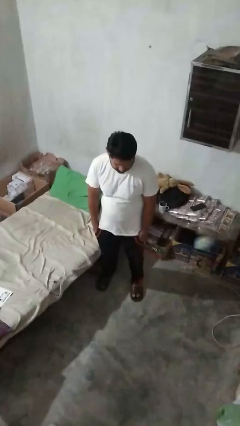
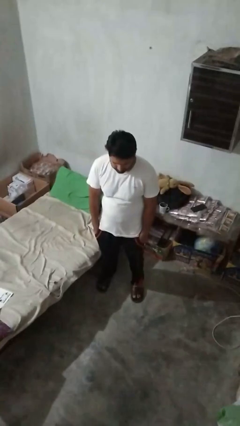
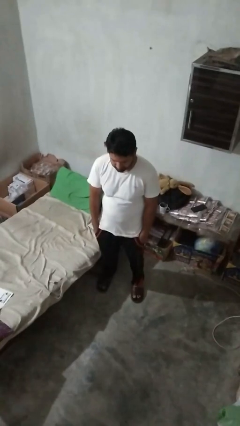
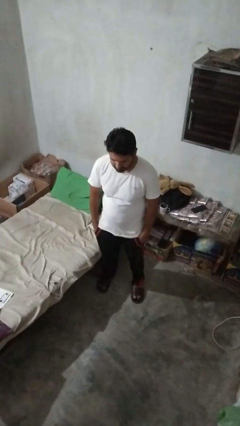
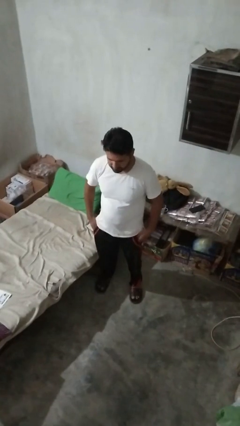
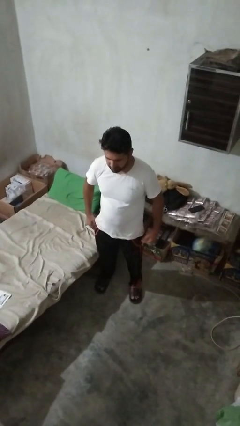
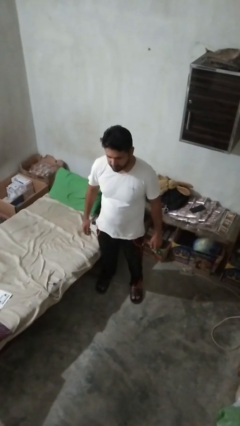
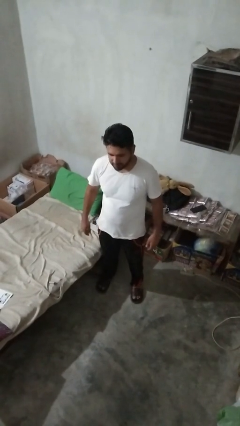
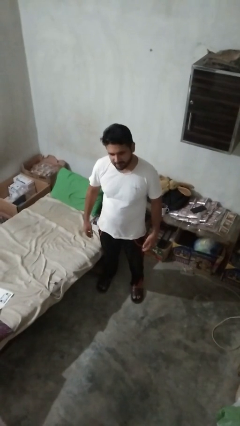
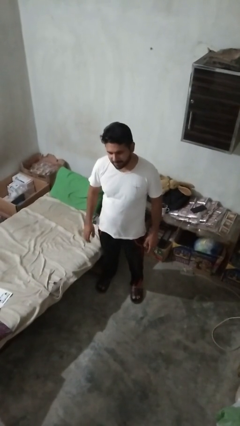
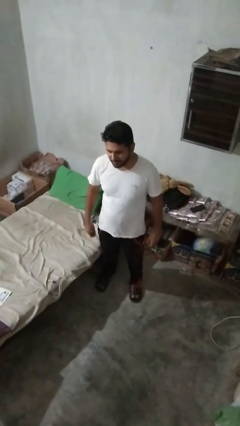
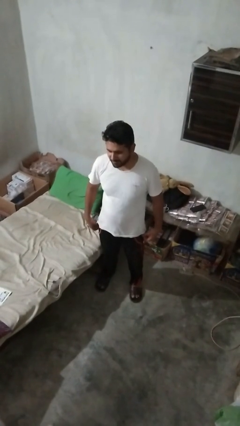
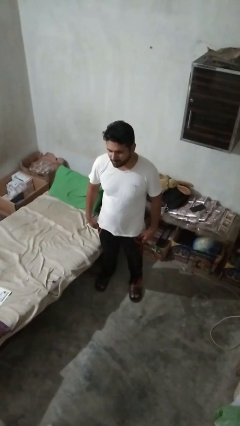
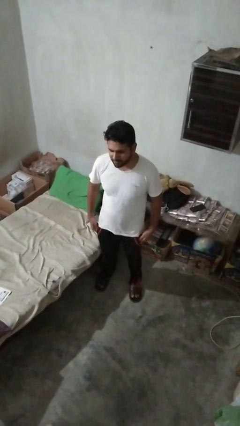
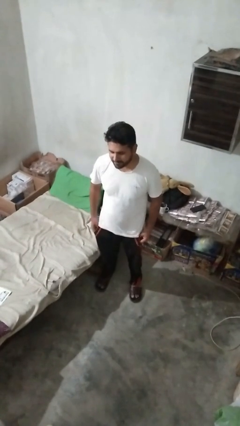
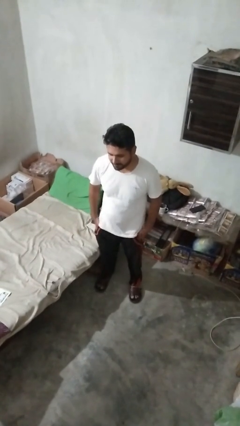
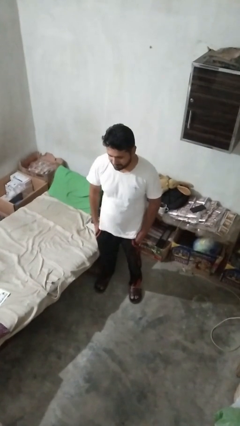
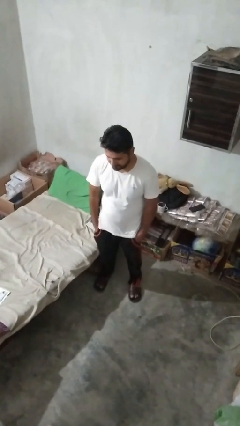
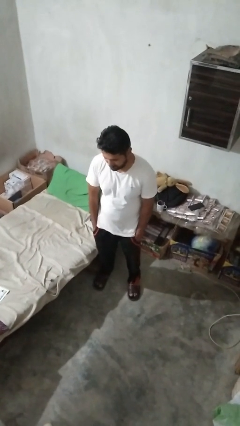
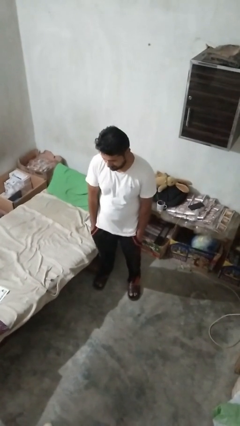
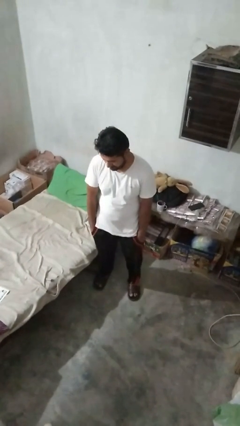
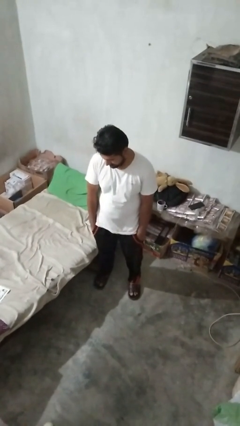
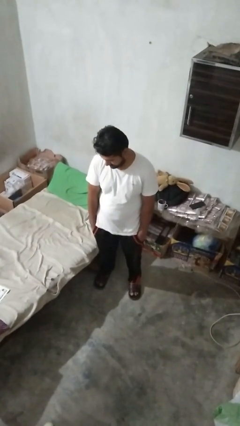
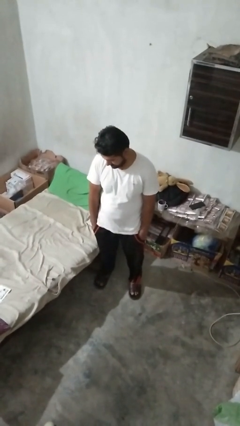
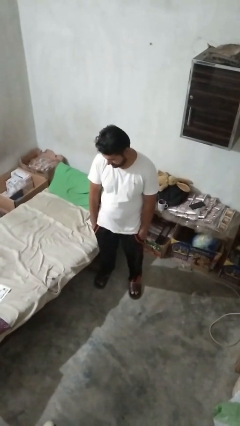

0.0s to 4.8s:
person puts hands in back pockets

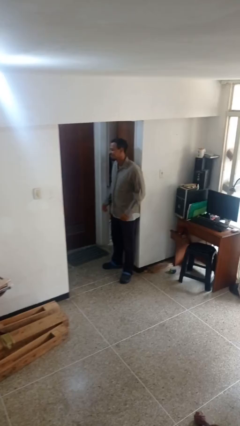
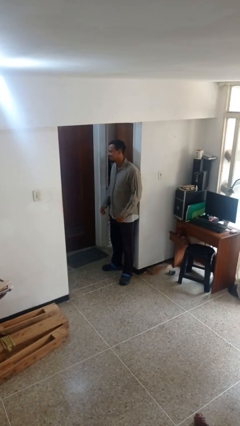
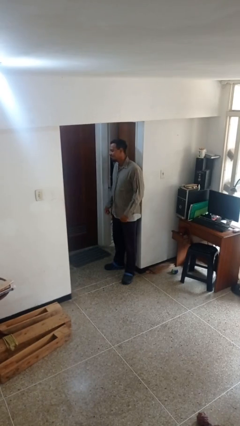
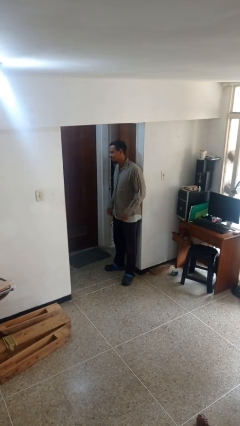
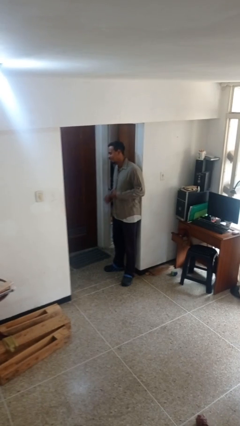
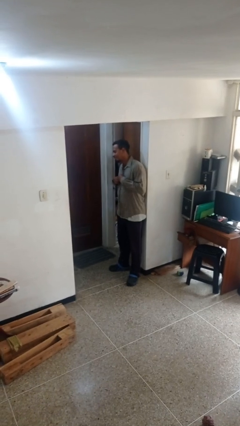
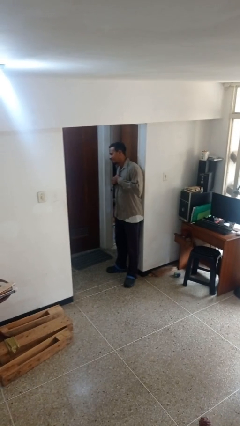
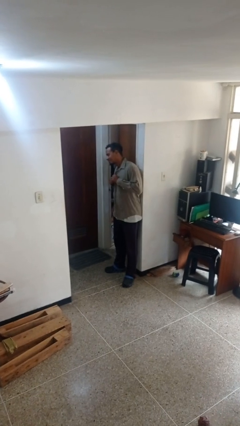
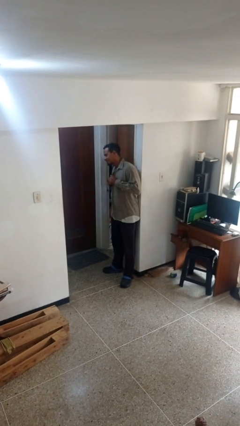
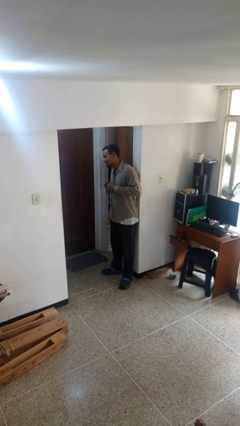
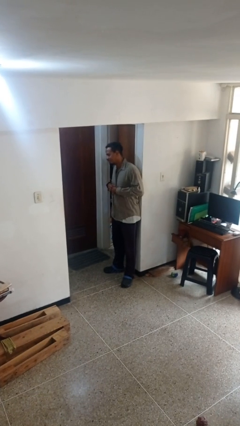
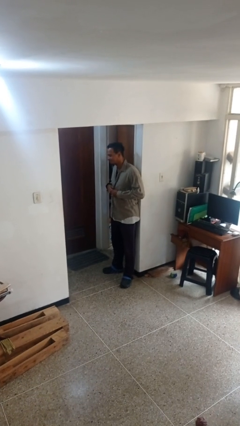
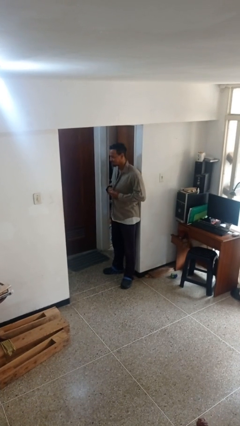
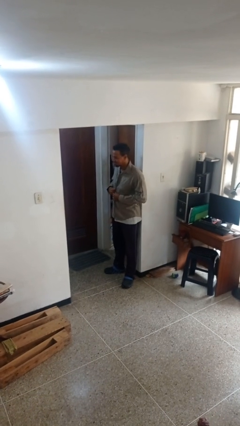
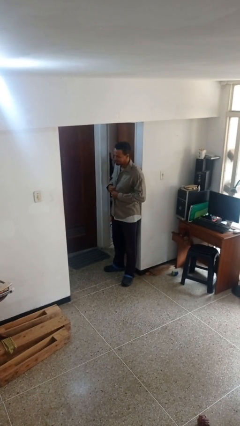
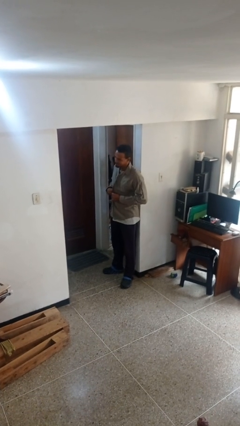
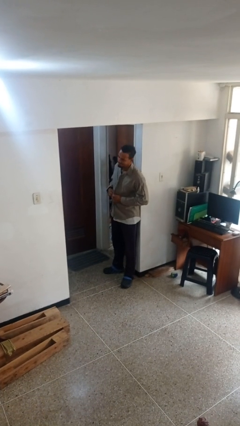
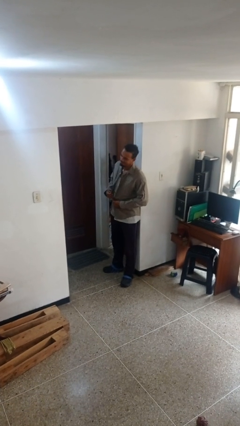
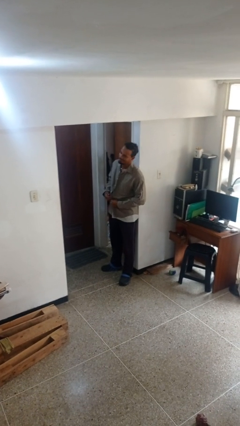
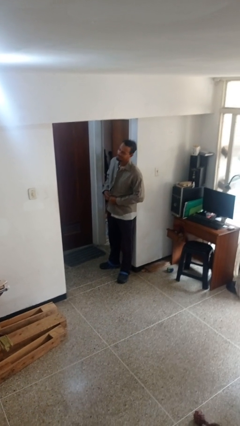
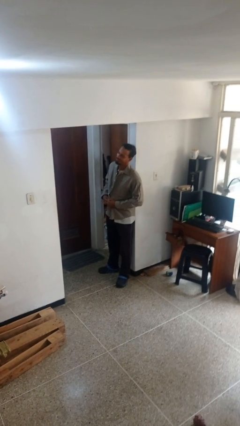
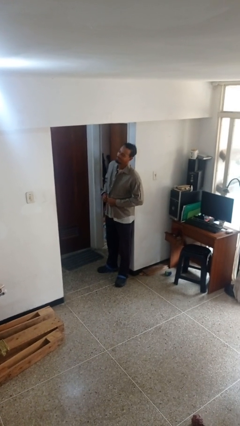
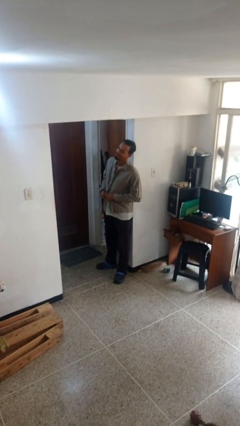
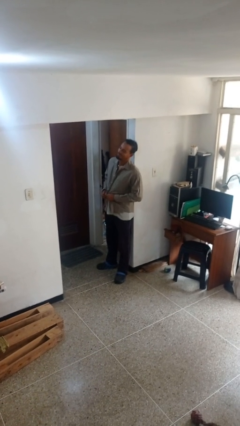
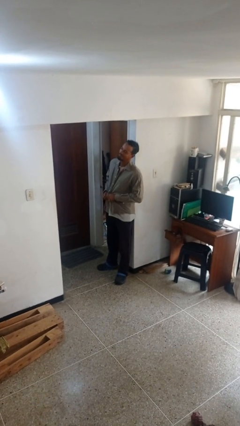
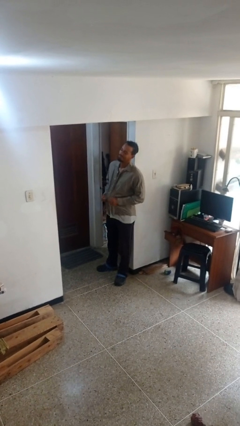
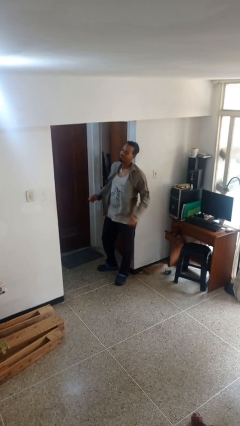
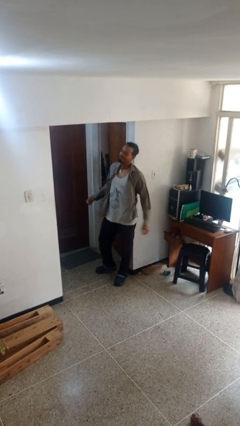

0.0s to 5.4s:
person unbuttons shirt

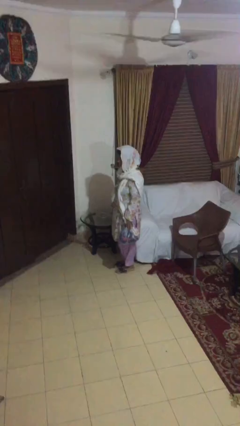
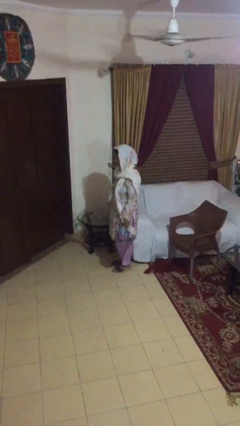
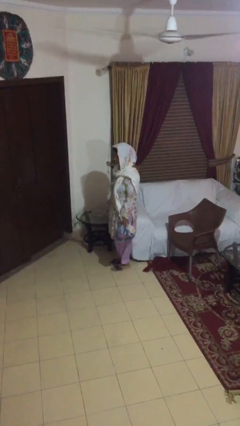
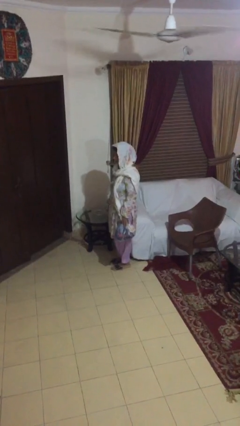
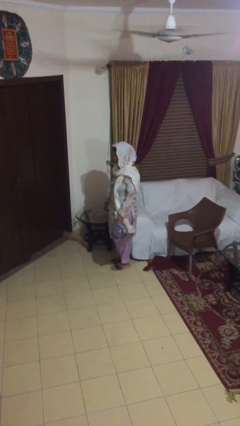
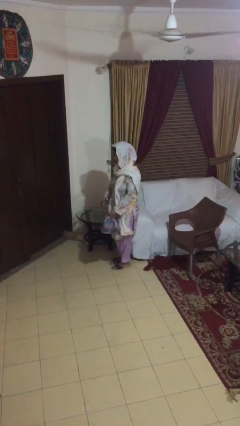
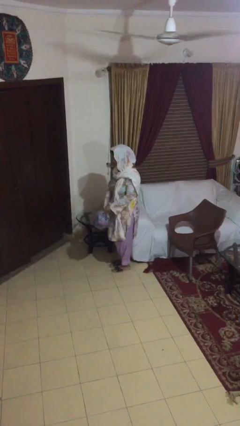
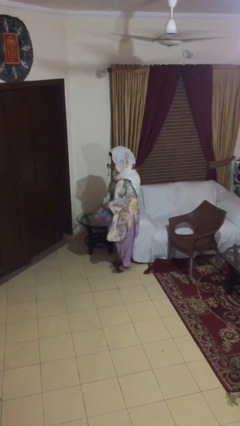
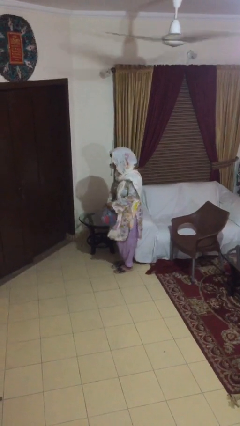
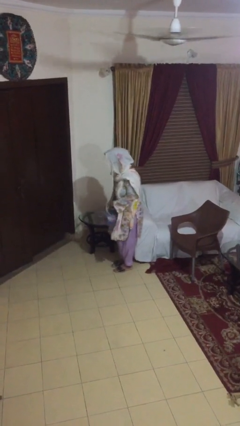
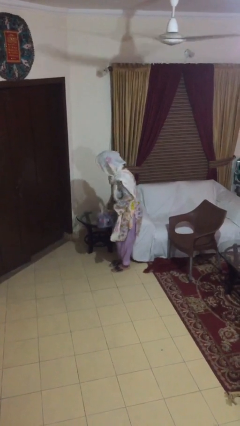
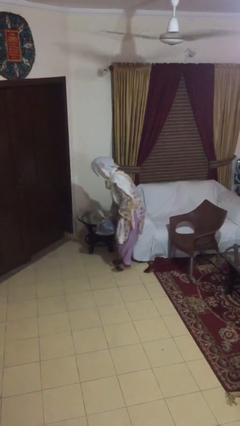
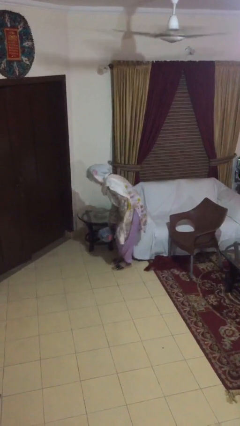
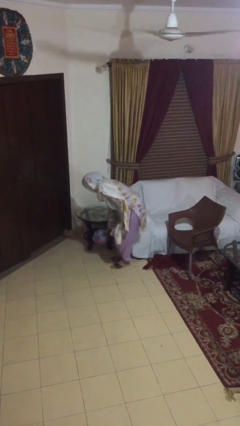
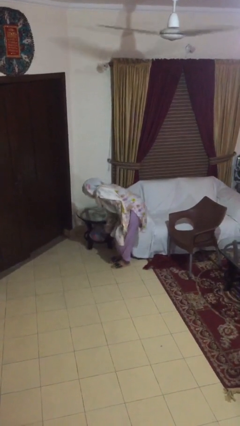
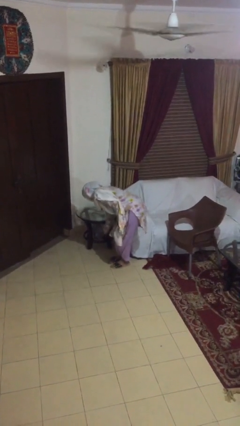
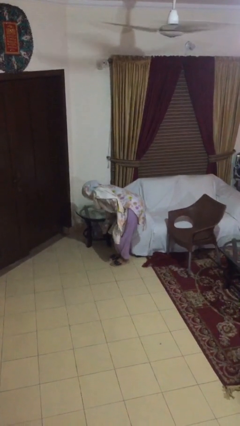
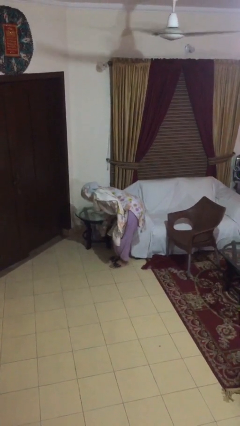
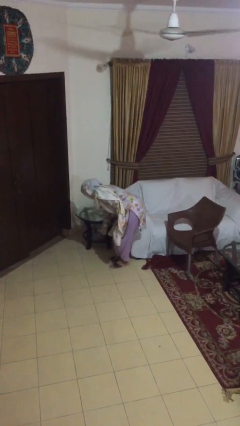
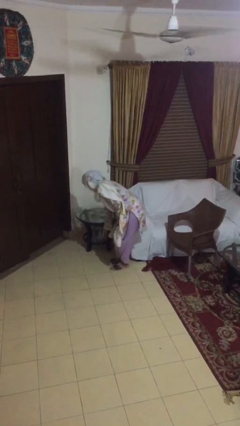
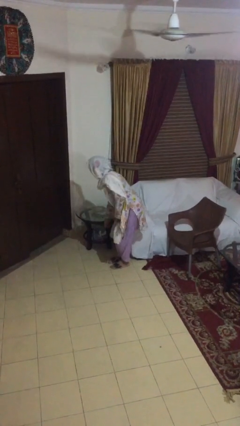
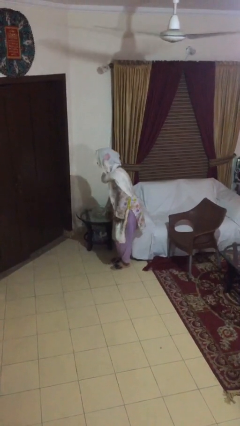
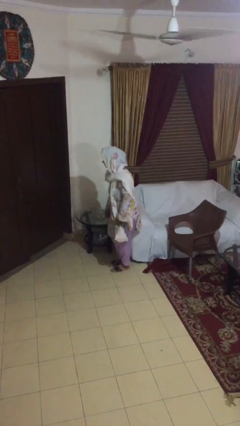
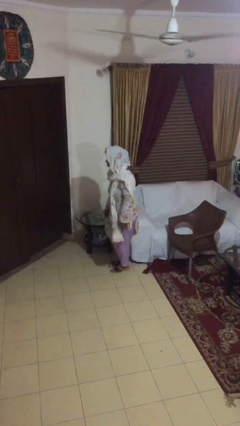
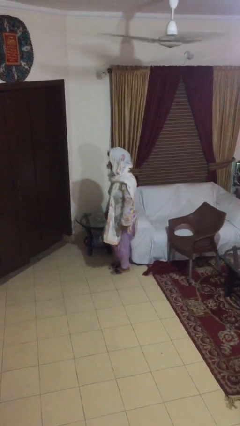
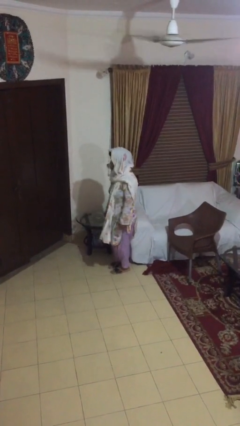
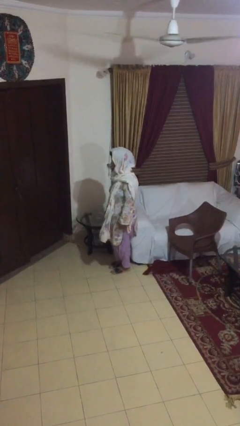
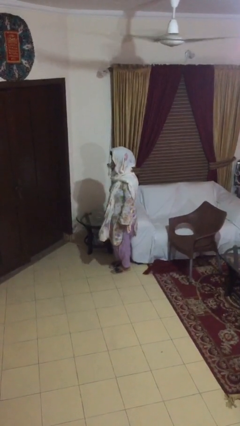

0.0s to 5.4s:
person puts down object on table

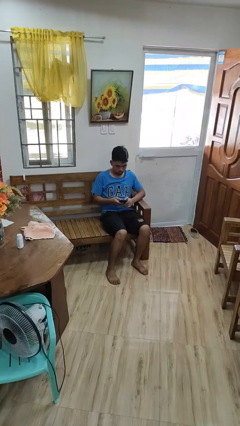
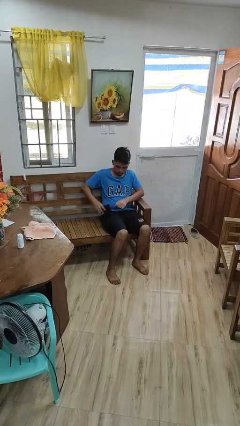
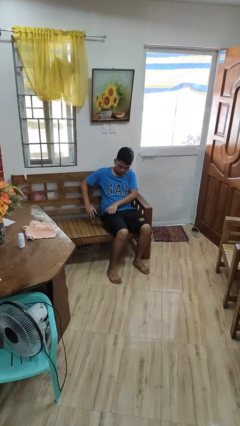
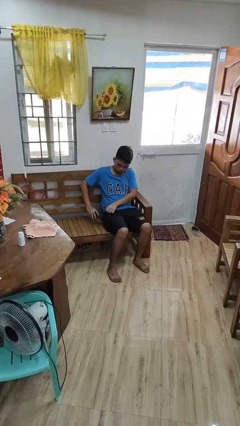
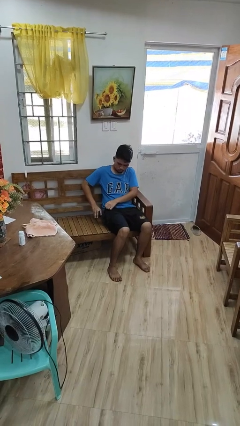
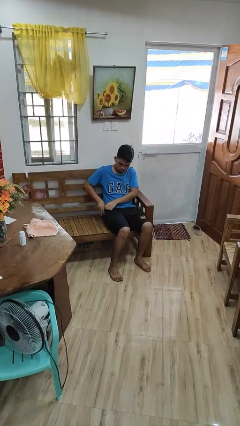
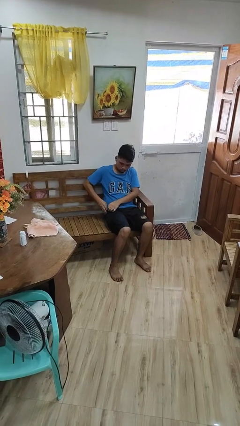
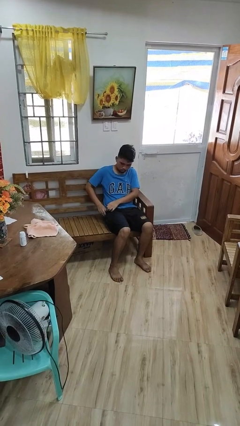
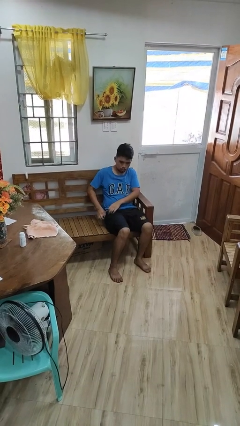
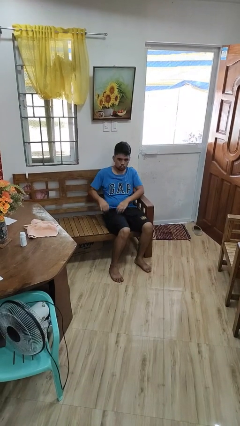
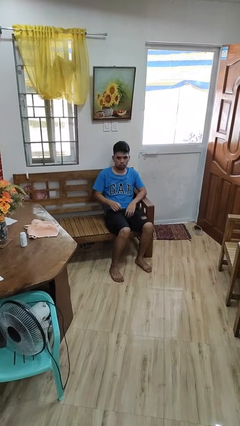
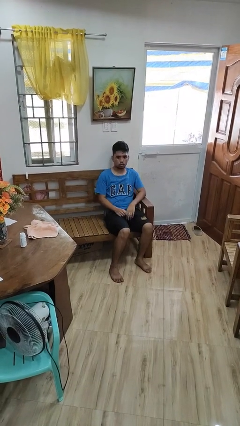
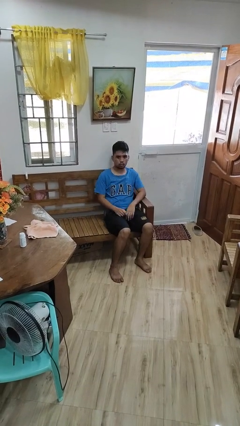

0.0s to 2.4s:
person puts phone into pocket
